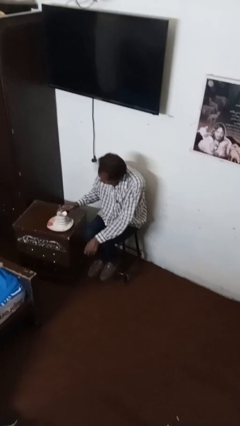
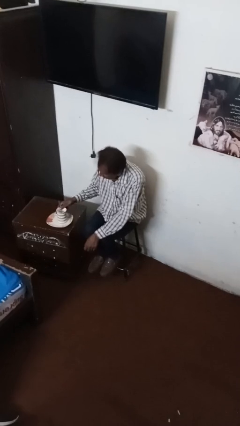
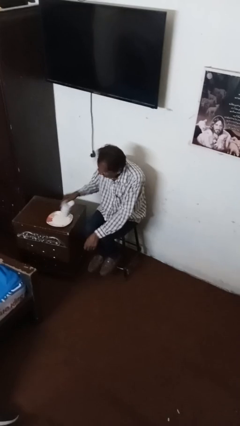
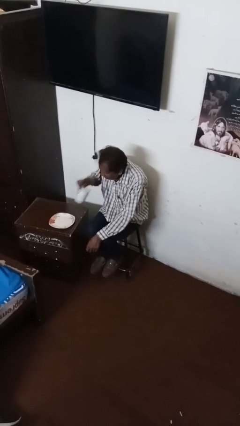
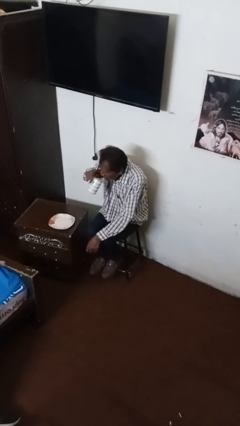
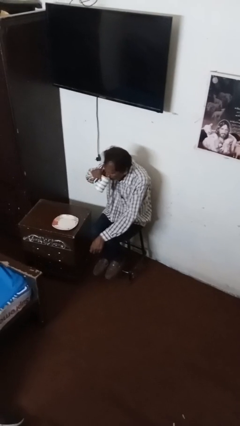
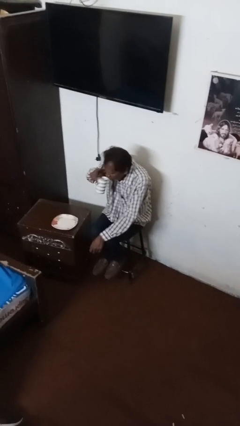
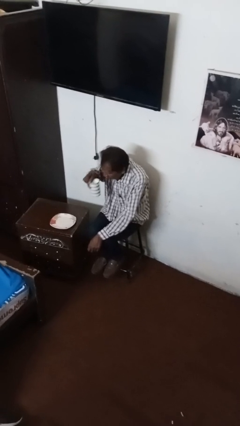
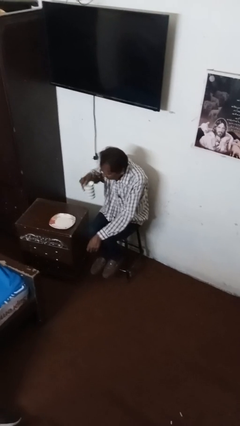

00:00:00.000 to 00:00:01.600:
person drinks from mug

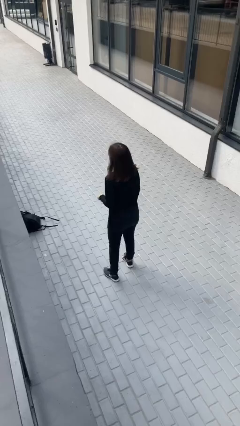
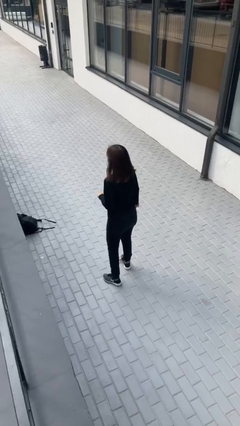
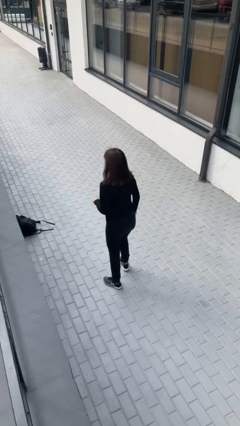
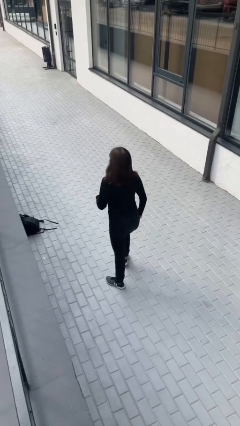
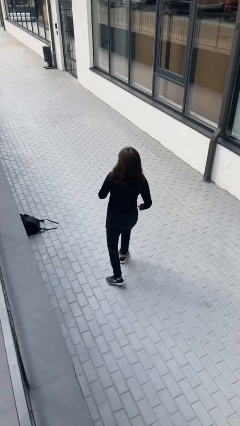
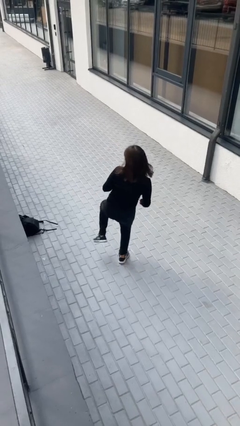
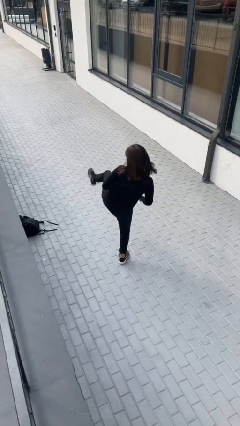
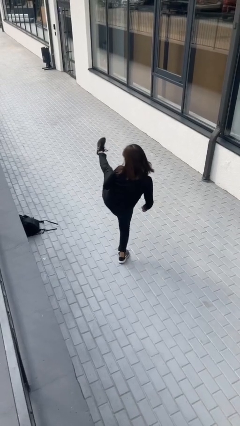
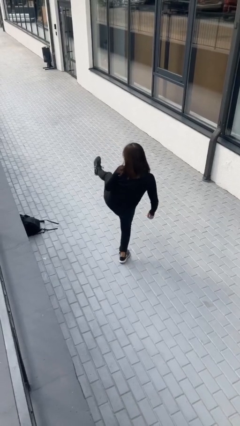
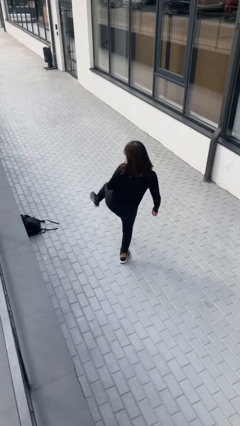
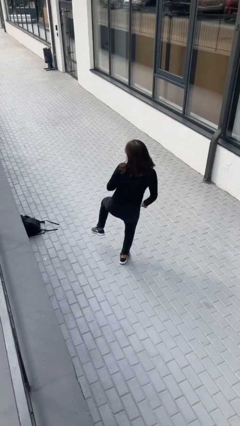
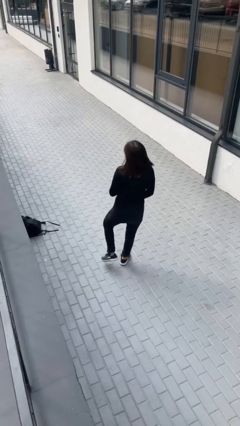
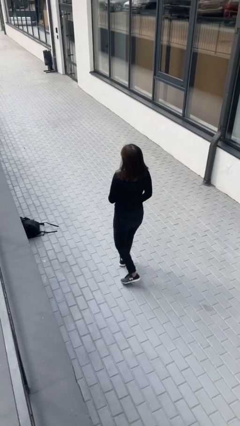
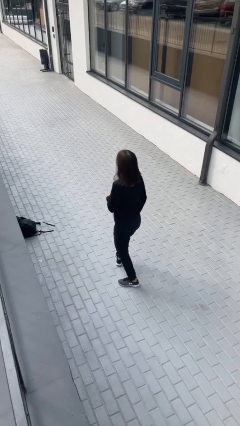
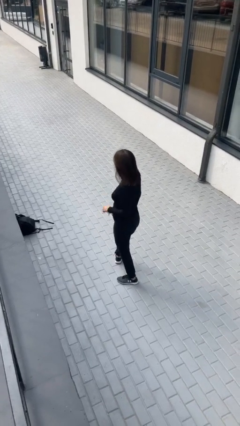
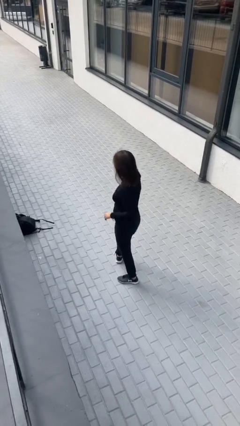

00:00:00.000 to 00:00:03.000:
person karate kicks

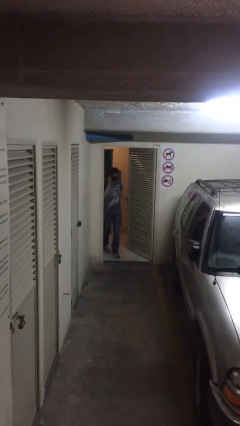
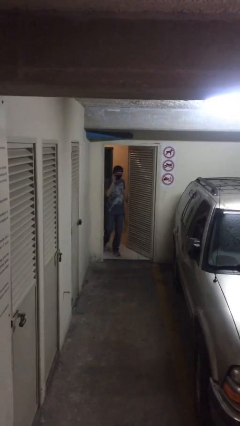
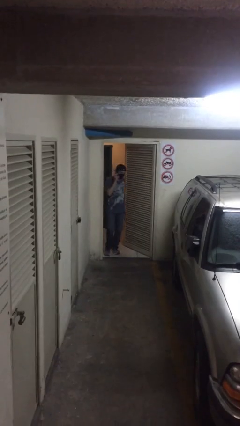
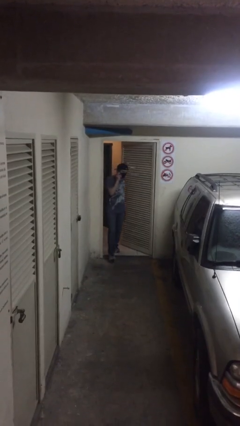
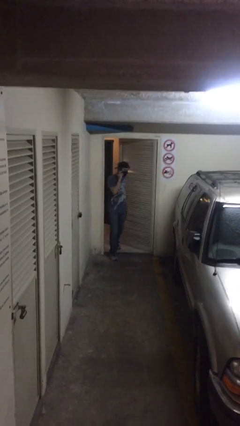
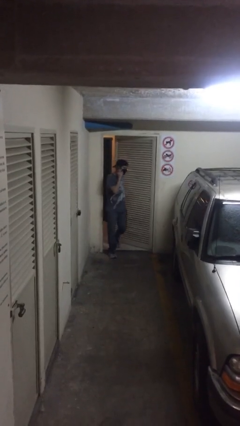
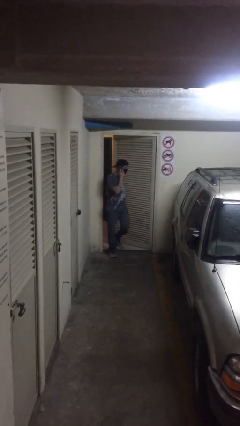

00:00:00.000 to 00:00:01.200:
person enters scene through structure

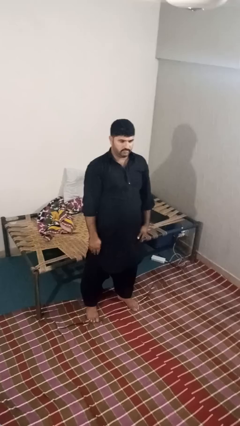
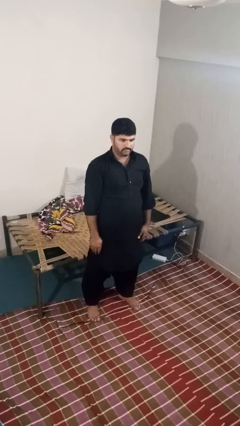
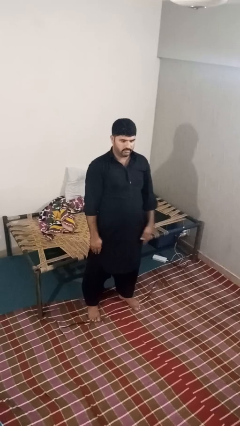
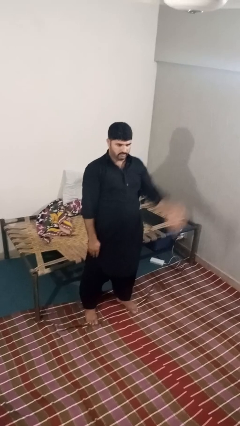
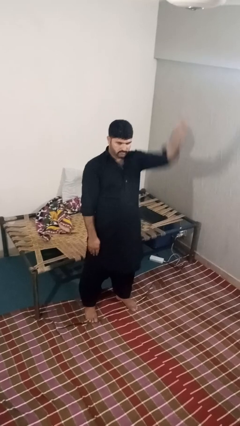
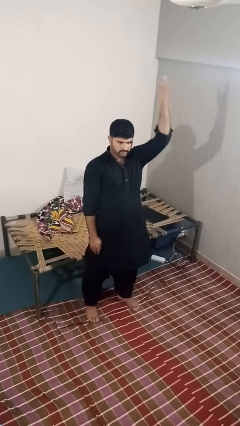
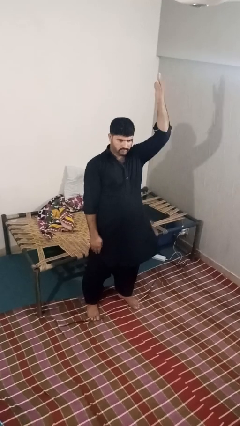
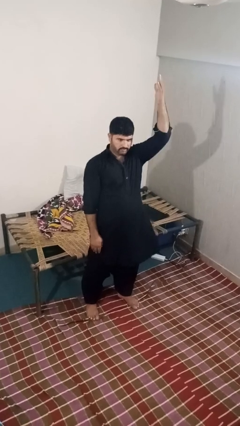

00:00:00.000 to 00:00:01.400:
person gestures swipe up

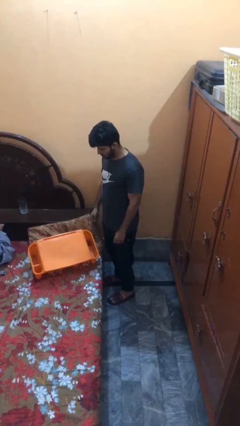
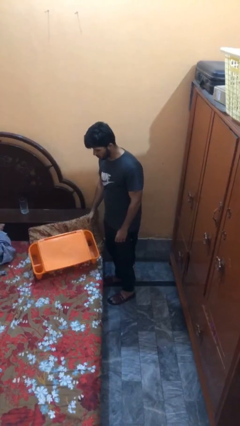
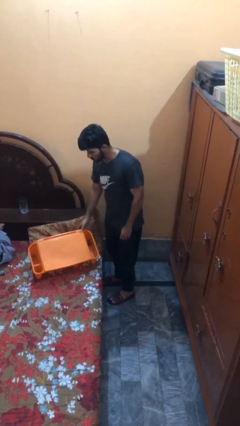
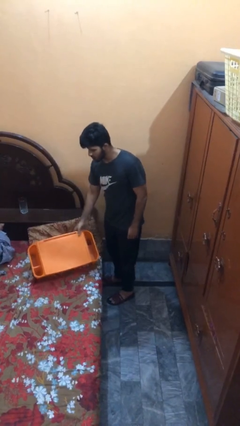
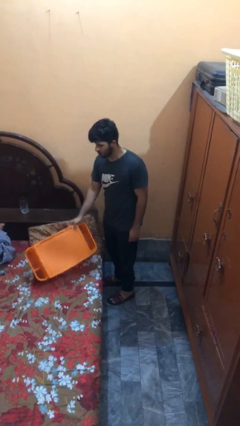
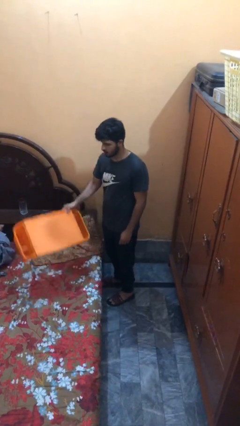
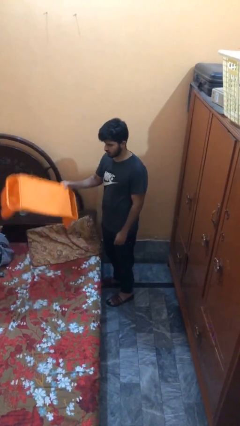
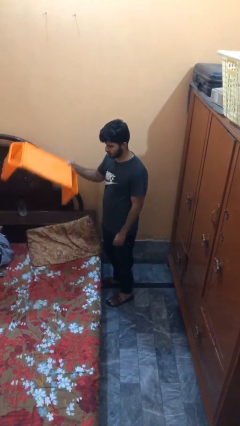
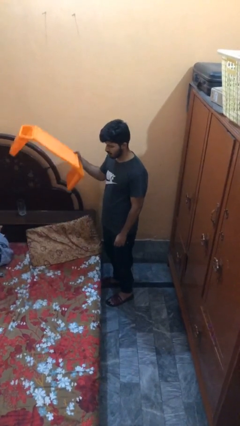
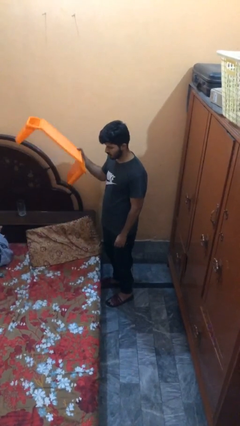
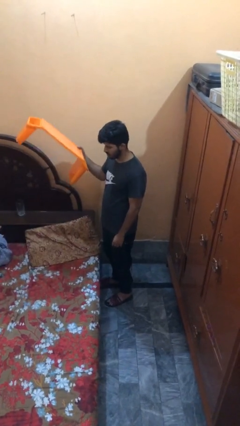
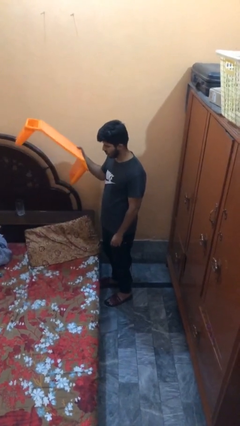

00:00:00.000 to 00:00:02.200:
person picks up object from bed

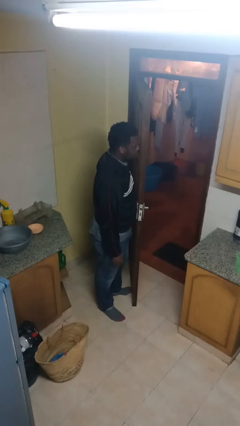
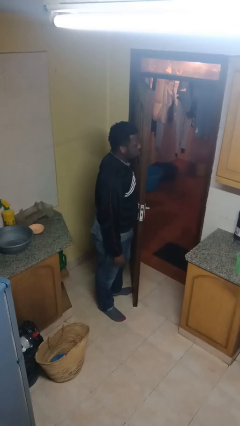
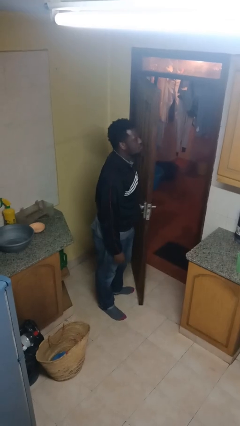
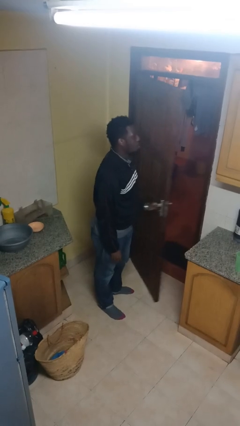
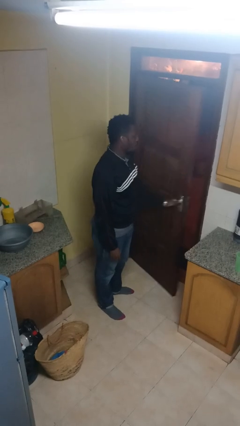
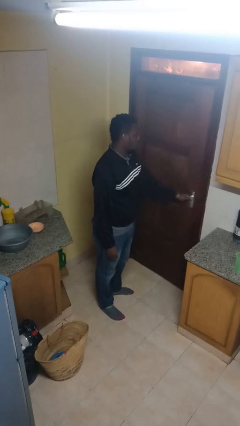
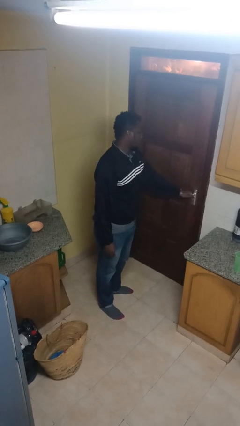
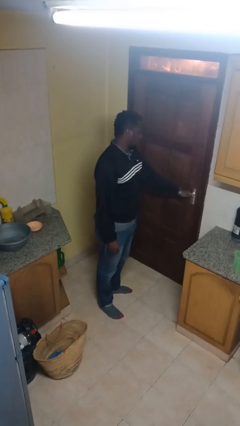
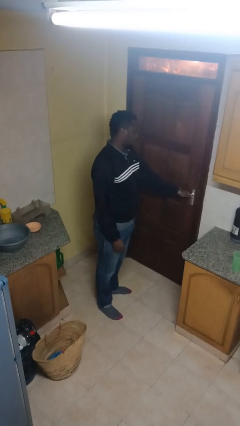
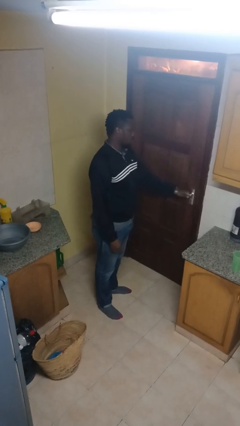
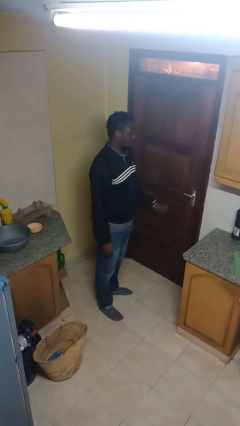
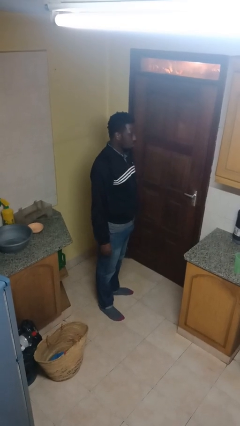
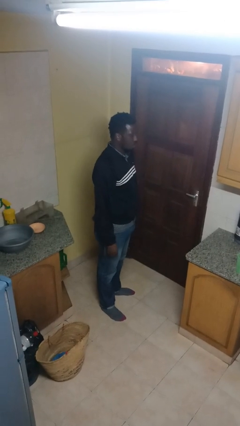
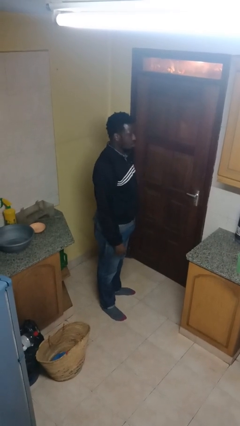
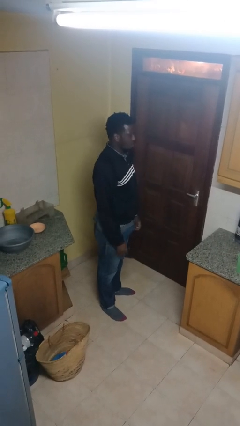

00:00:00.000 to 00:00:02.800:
person closes facility door

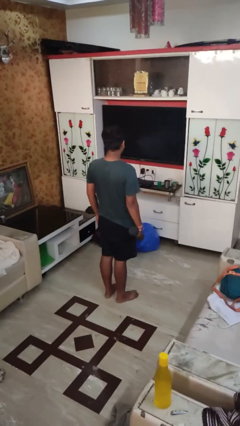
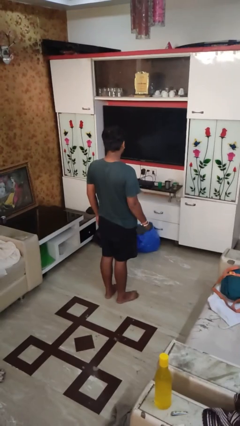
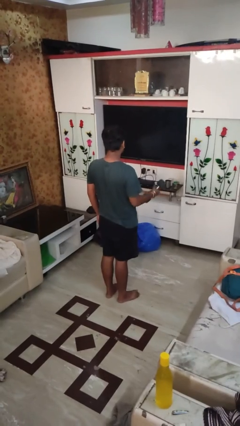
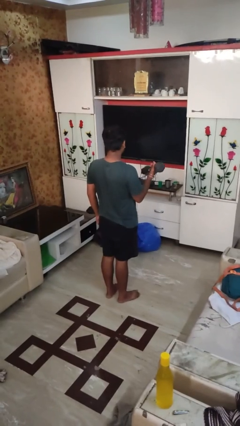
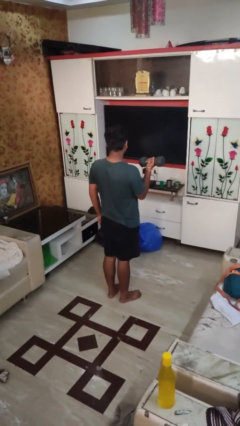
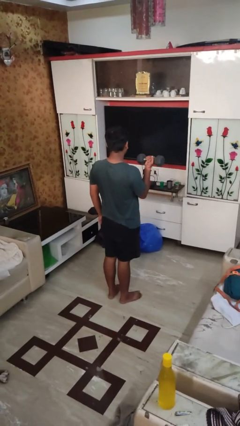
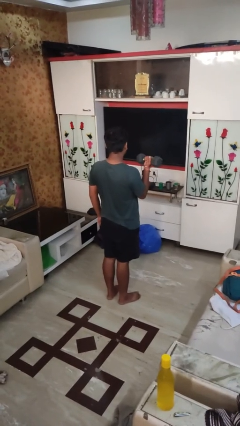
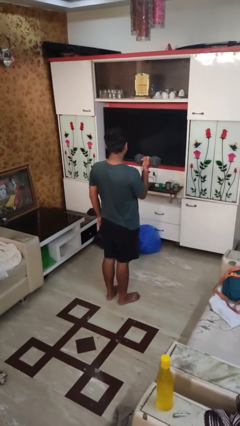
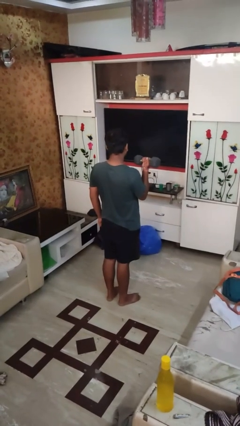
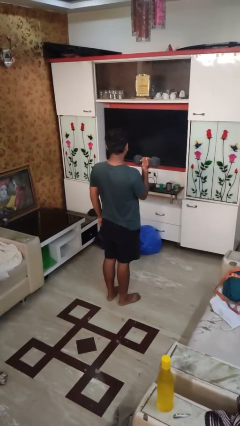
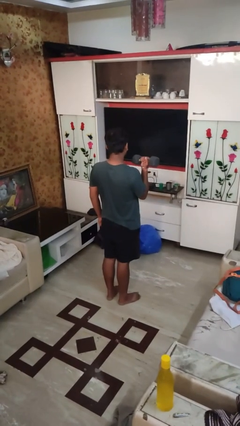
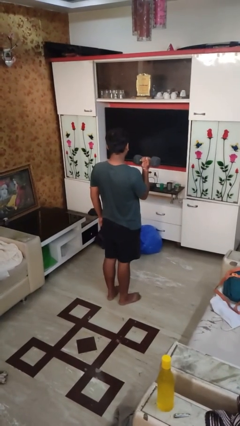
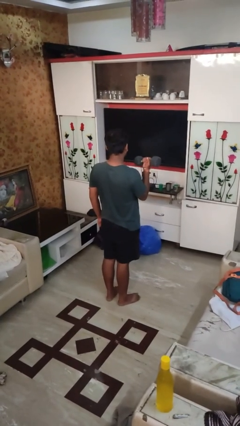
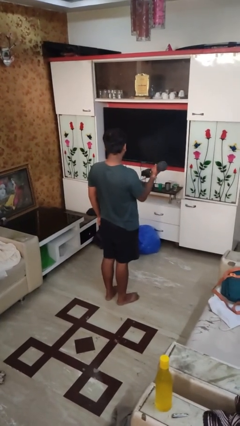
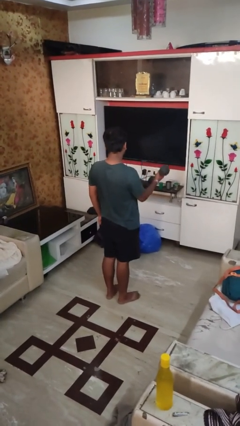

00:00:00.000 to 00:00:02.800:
person lifts dumbbells

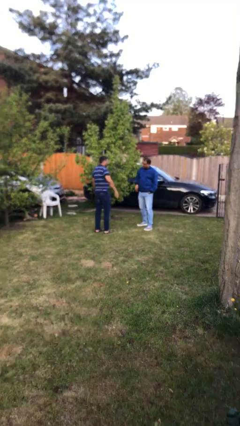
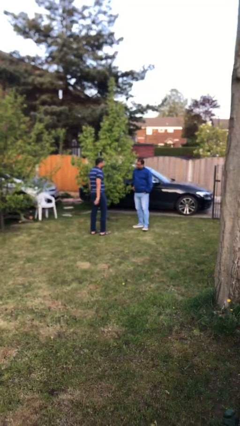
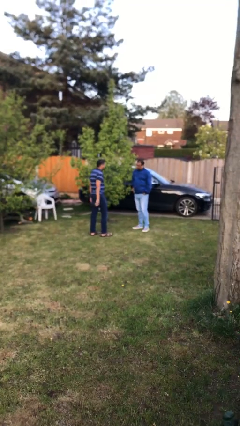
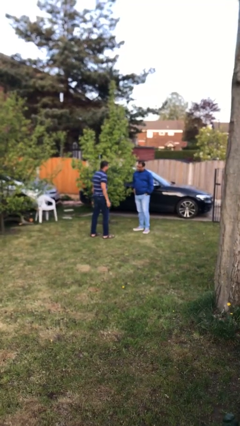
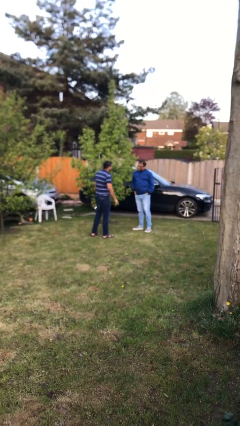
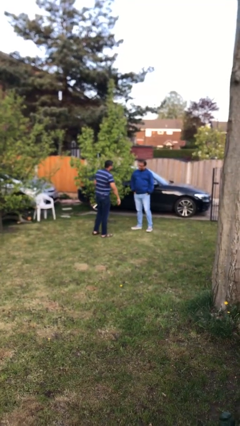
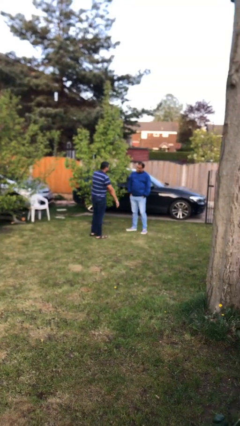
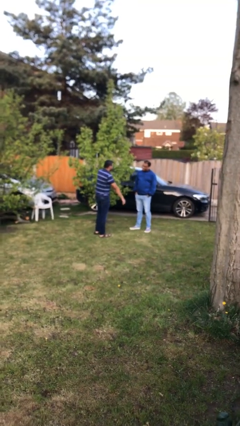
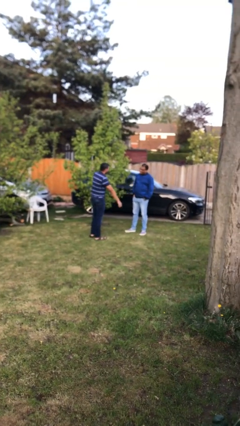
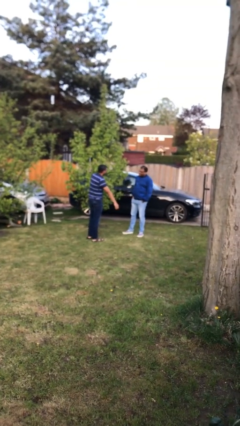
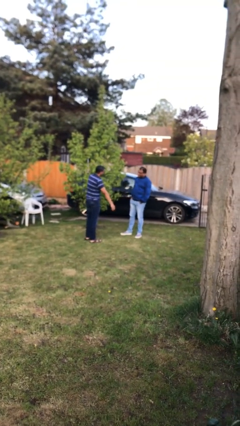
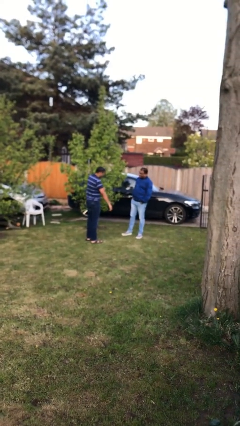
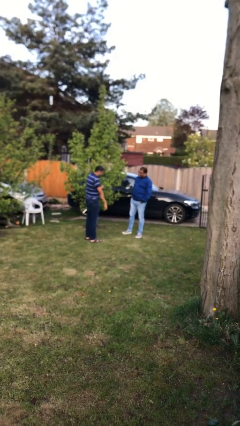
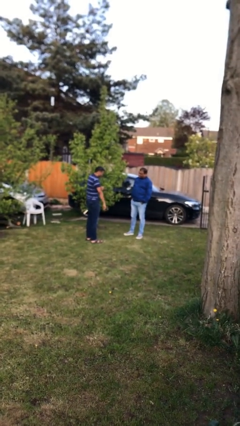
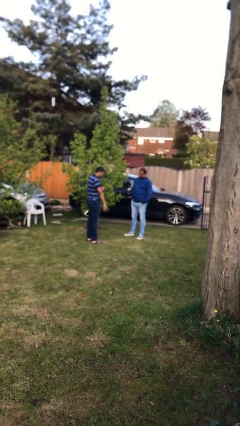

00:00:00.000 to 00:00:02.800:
person highfives hand
